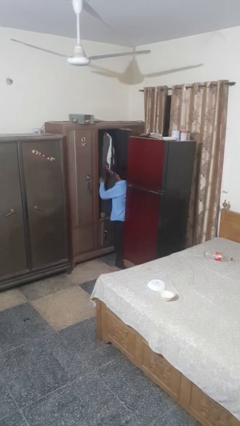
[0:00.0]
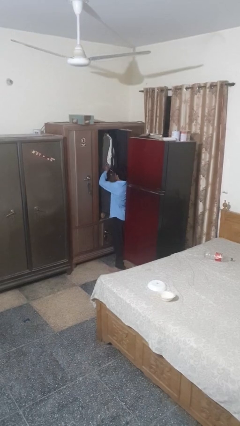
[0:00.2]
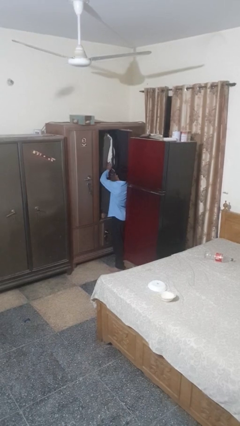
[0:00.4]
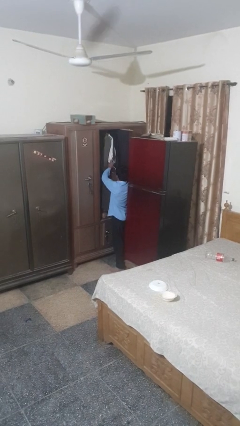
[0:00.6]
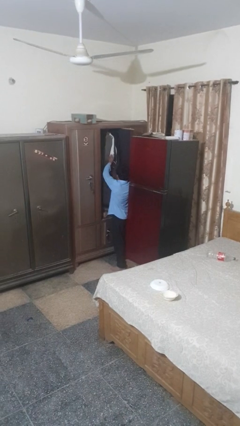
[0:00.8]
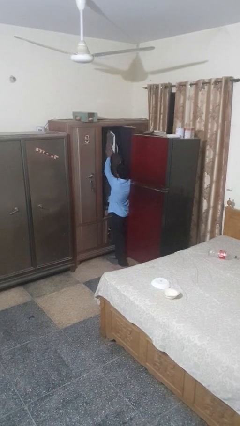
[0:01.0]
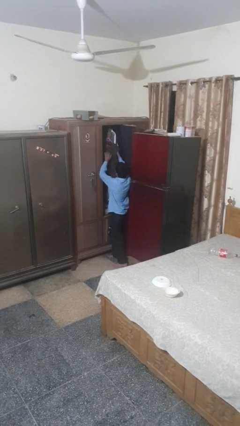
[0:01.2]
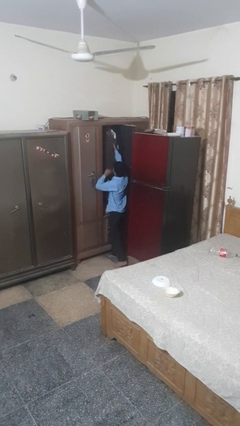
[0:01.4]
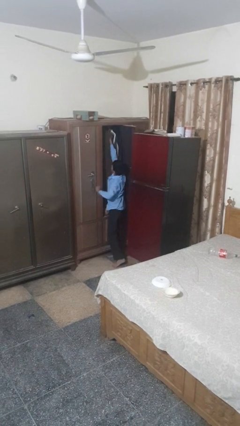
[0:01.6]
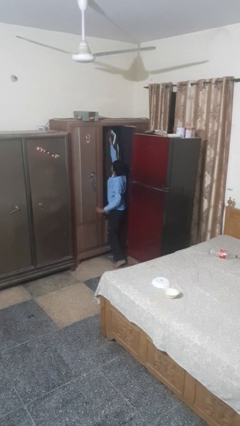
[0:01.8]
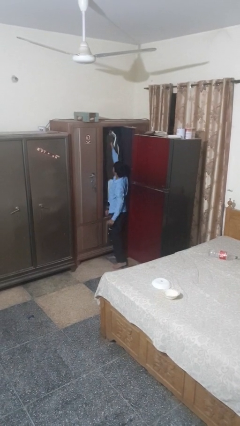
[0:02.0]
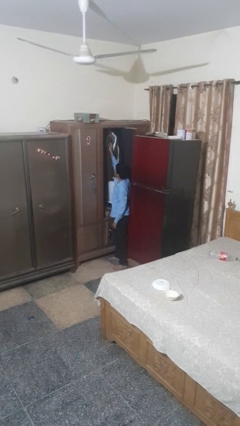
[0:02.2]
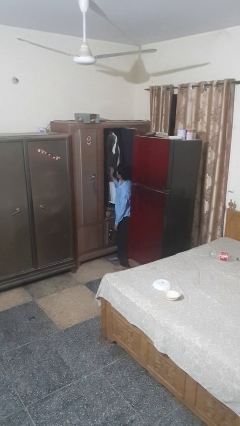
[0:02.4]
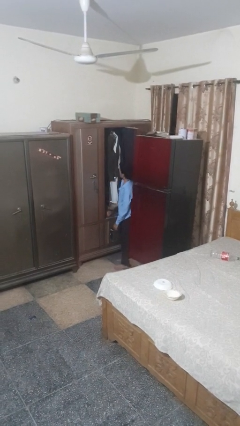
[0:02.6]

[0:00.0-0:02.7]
person puts clothes into closet

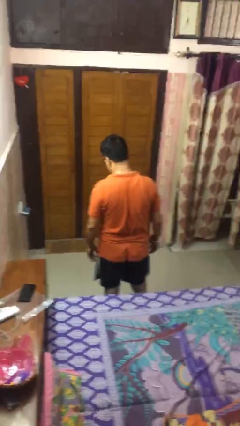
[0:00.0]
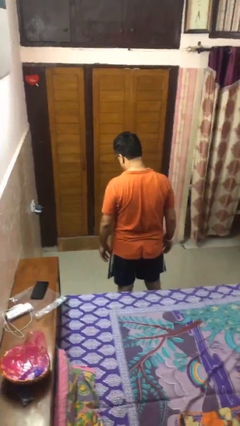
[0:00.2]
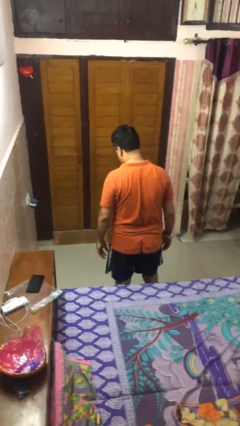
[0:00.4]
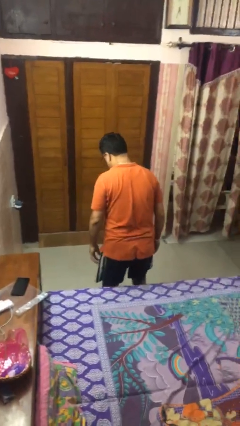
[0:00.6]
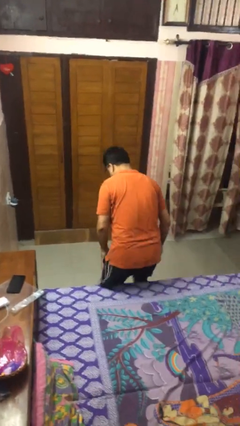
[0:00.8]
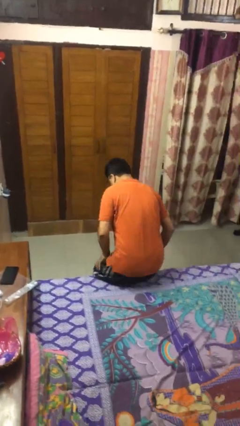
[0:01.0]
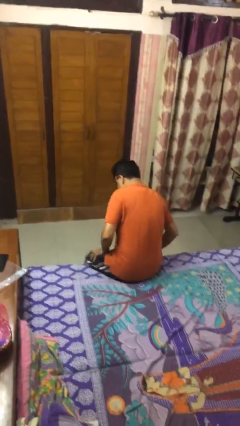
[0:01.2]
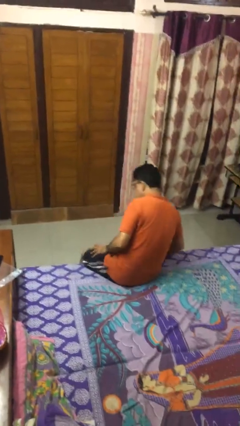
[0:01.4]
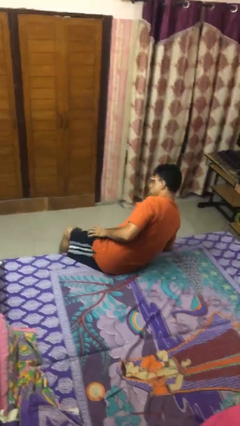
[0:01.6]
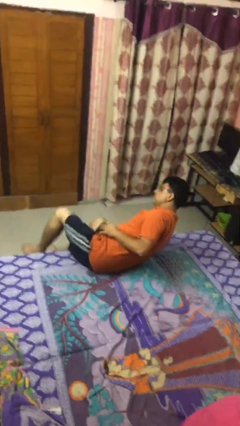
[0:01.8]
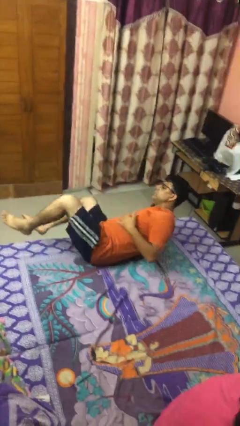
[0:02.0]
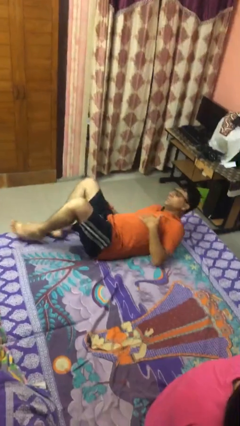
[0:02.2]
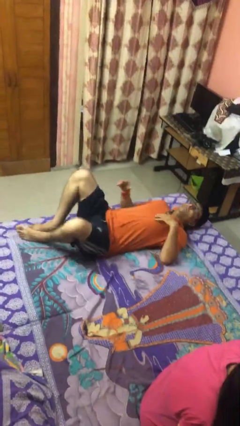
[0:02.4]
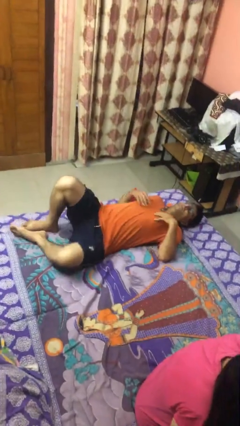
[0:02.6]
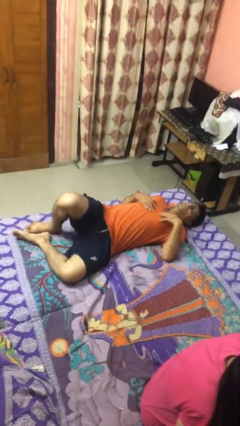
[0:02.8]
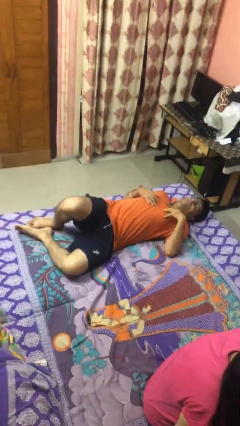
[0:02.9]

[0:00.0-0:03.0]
person lies down on bed

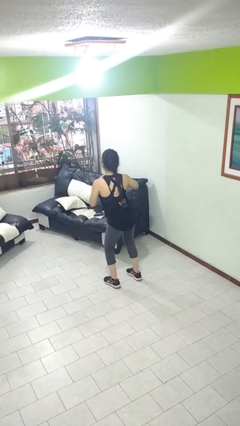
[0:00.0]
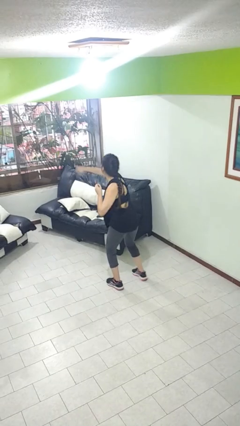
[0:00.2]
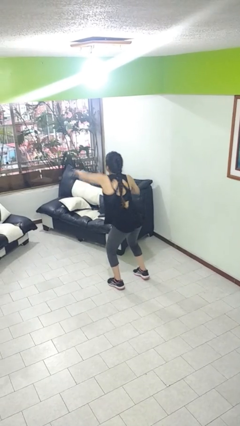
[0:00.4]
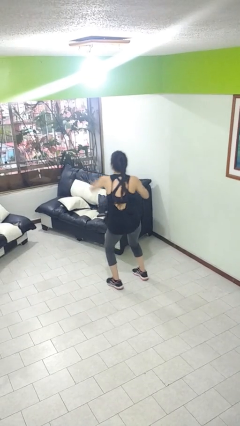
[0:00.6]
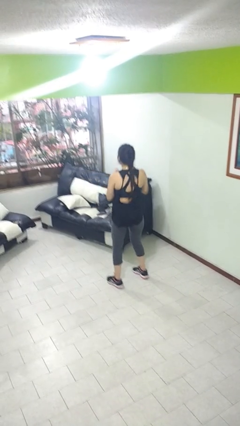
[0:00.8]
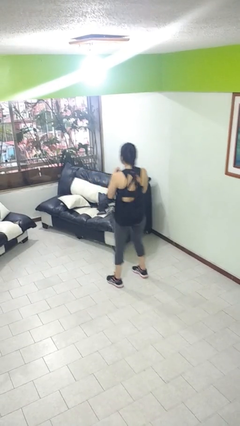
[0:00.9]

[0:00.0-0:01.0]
person punches

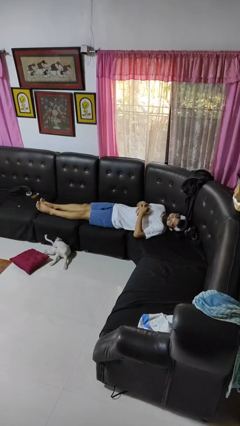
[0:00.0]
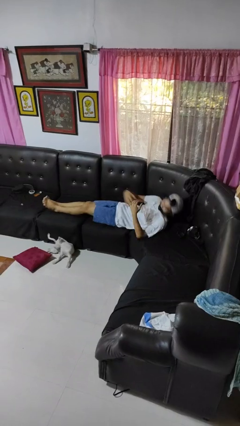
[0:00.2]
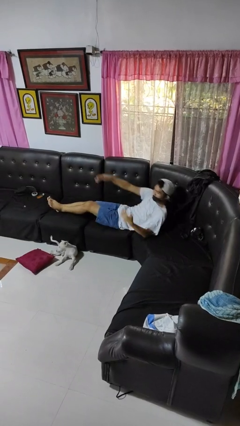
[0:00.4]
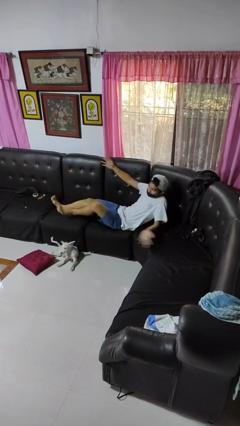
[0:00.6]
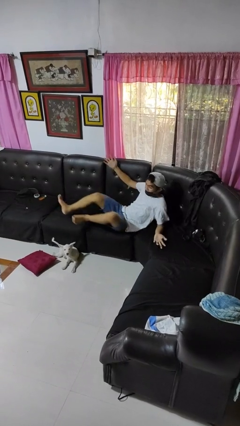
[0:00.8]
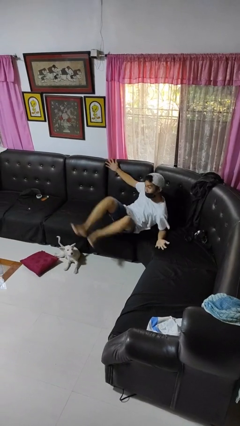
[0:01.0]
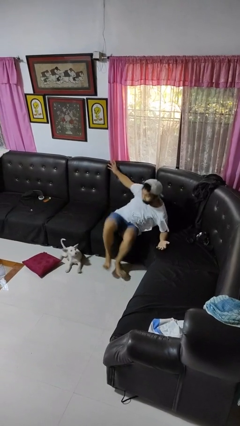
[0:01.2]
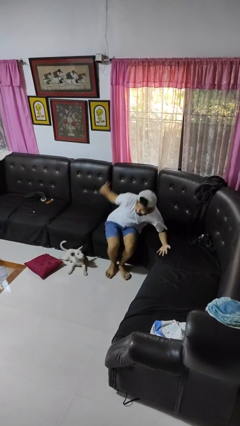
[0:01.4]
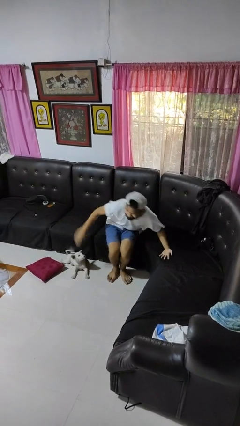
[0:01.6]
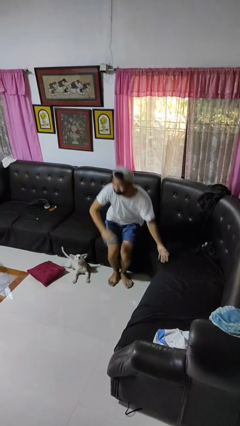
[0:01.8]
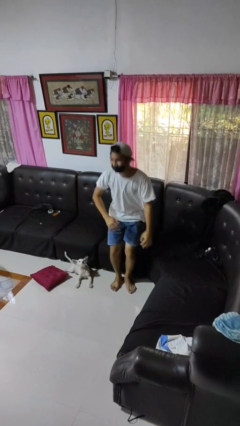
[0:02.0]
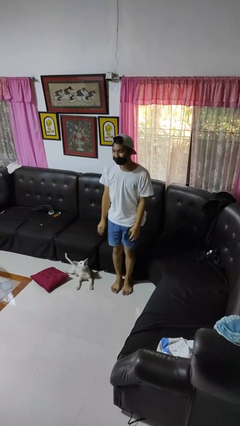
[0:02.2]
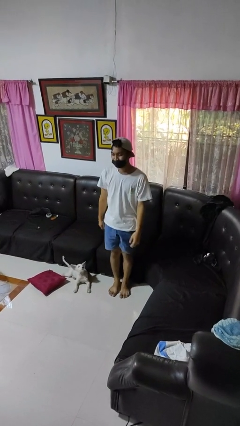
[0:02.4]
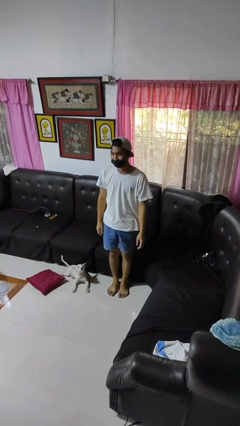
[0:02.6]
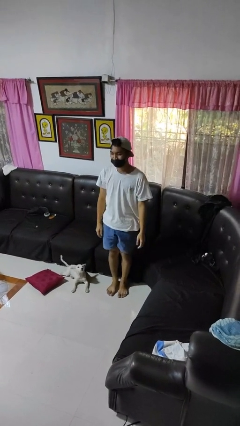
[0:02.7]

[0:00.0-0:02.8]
person stands up

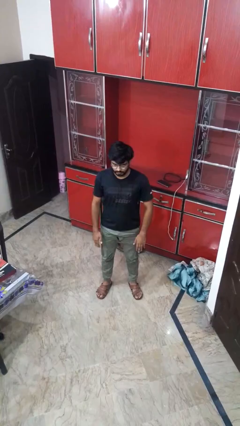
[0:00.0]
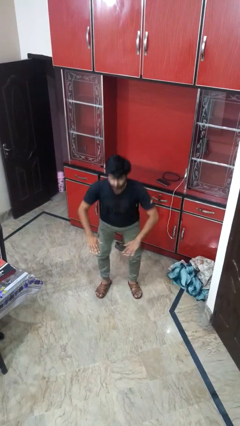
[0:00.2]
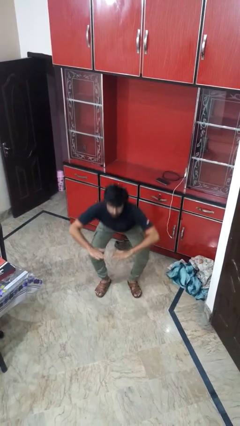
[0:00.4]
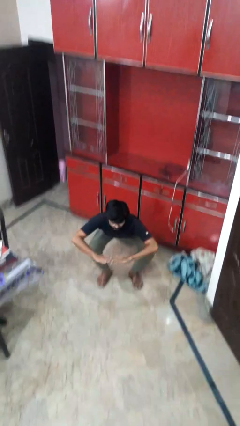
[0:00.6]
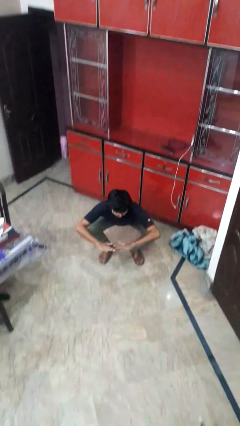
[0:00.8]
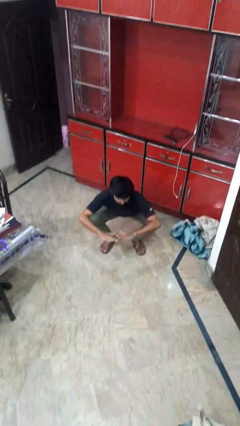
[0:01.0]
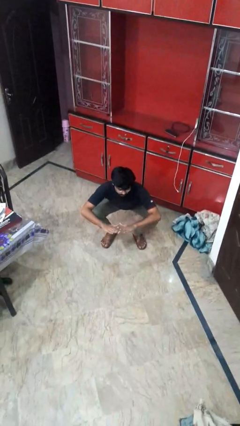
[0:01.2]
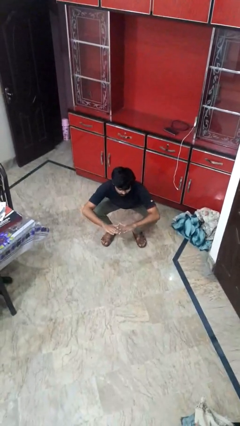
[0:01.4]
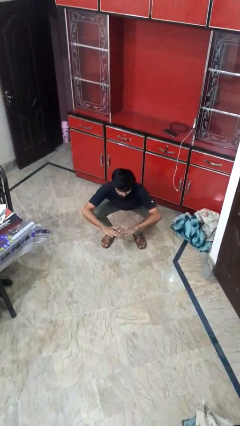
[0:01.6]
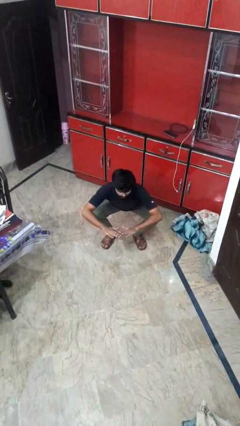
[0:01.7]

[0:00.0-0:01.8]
person squats

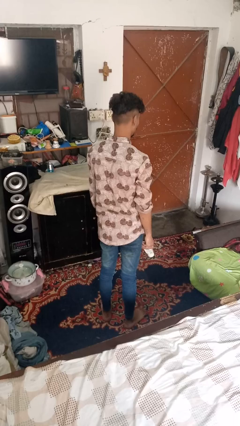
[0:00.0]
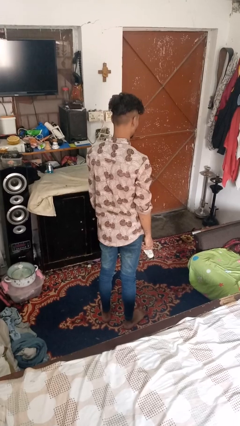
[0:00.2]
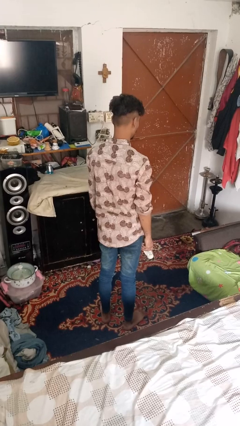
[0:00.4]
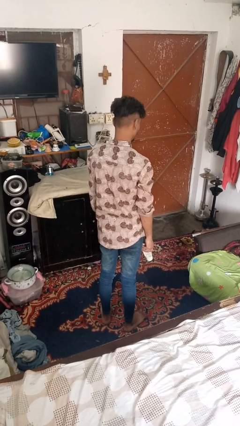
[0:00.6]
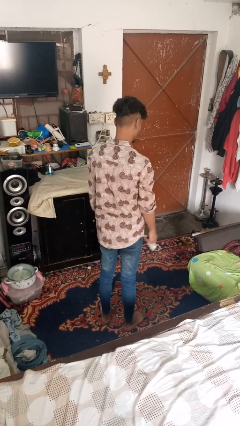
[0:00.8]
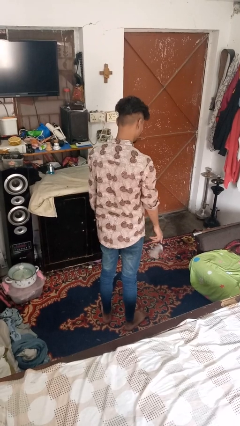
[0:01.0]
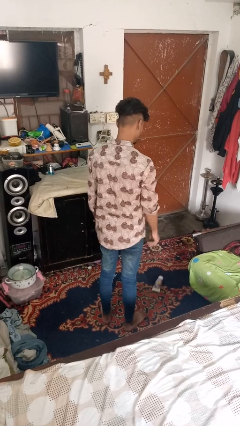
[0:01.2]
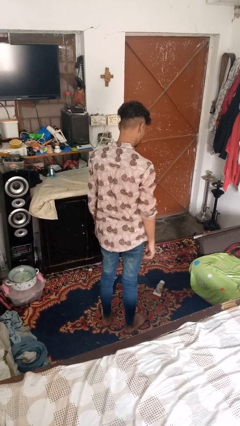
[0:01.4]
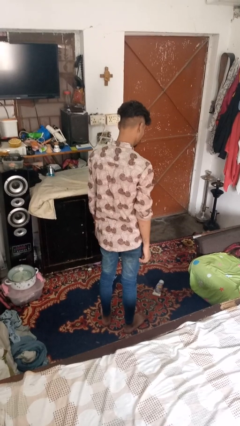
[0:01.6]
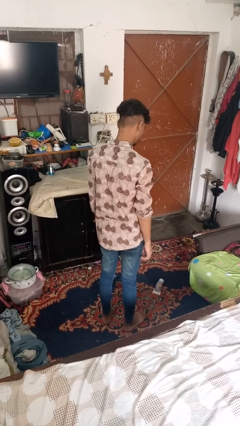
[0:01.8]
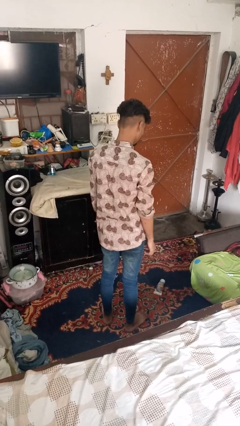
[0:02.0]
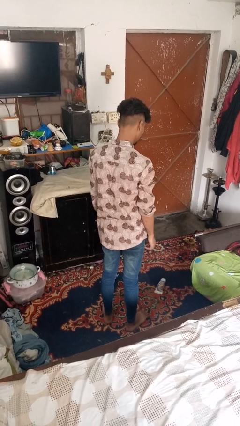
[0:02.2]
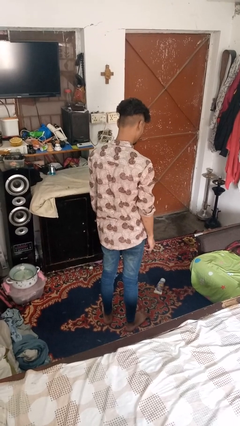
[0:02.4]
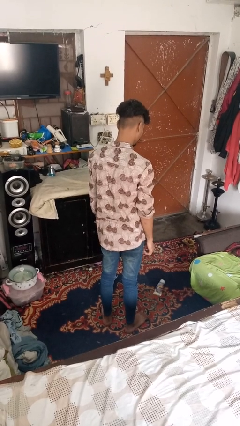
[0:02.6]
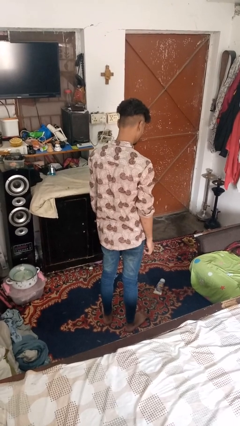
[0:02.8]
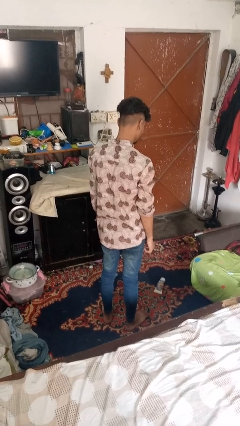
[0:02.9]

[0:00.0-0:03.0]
person throws object to ground

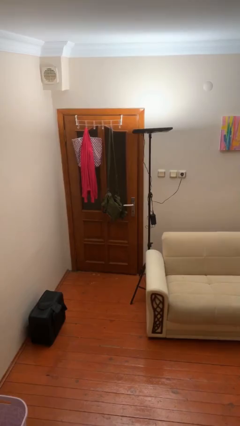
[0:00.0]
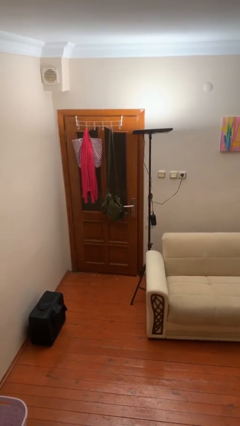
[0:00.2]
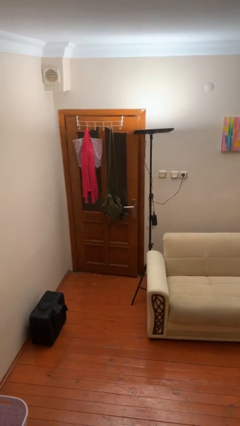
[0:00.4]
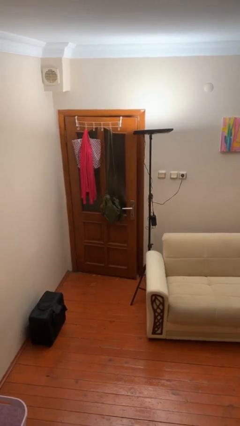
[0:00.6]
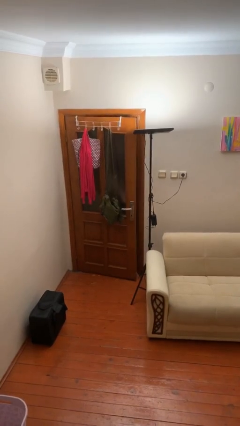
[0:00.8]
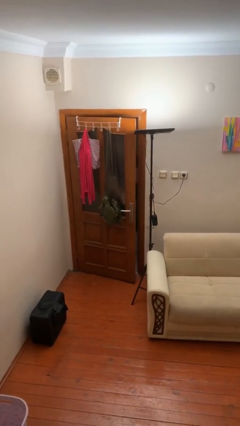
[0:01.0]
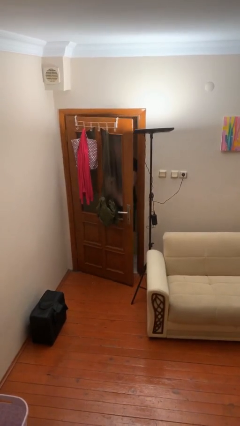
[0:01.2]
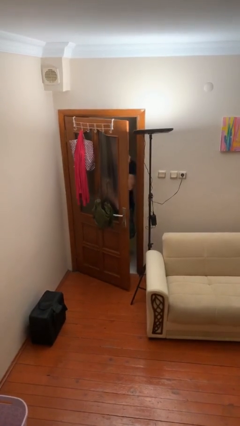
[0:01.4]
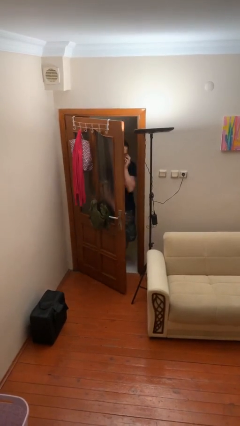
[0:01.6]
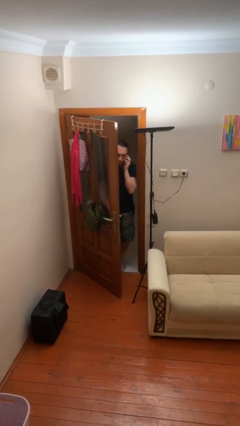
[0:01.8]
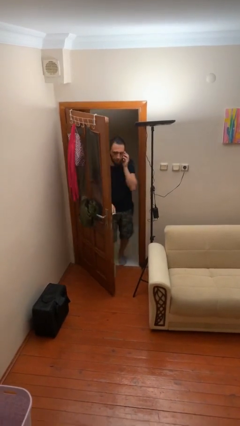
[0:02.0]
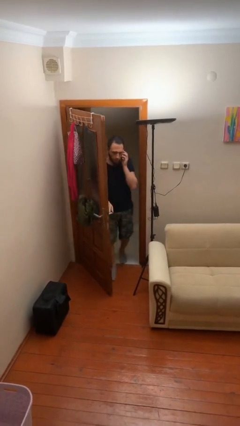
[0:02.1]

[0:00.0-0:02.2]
person opens facility door

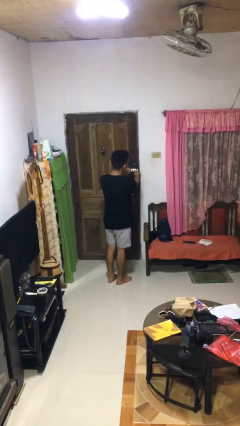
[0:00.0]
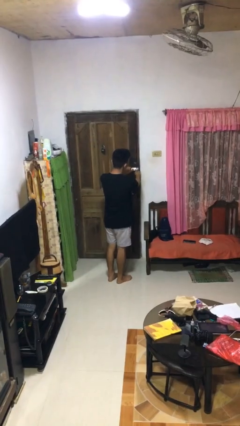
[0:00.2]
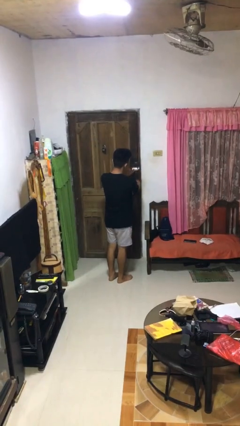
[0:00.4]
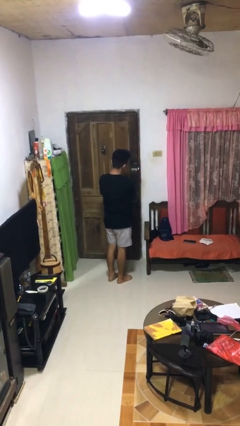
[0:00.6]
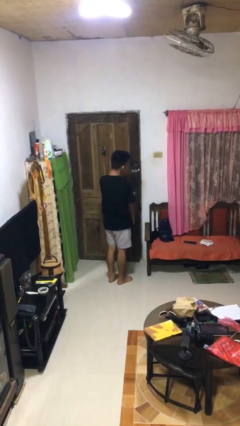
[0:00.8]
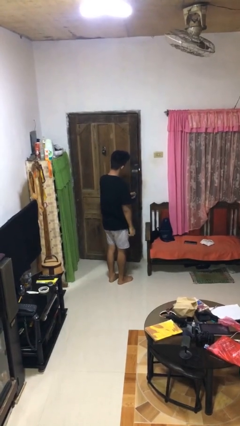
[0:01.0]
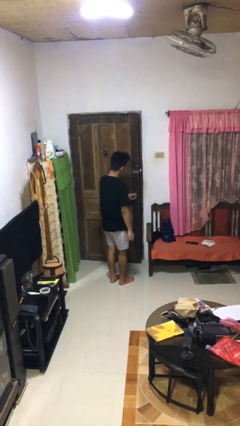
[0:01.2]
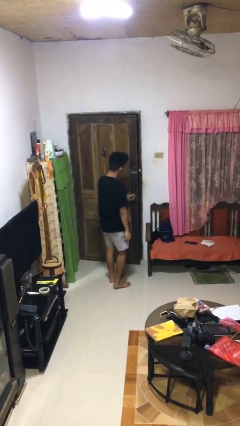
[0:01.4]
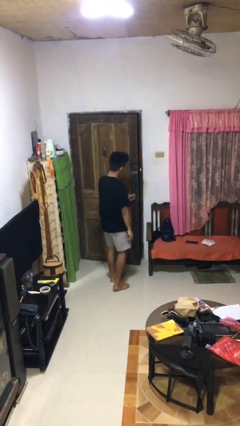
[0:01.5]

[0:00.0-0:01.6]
person unlocks door with keys
